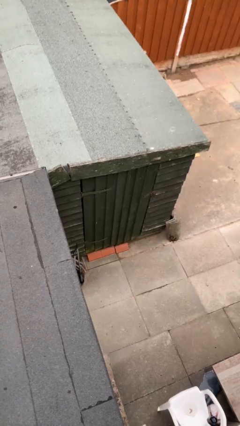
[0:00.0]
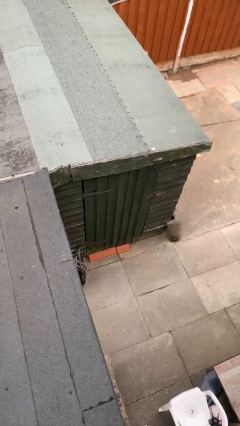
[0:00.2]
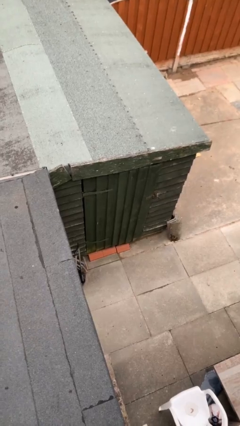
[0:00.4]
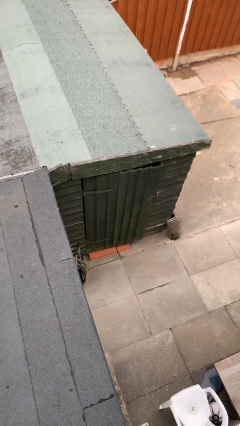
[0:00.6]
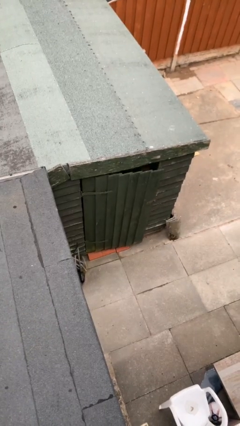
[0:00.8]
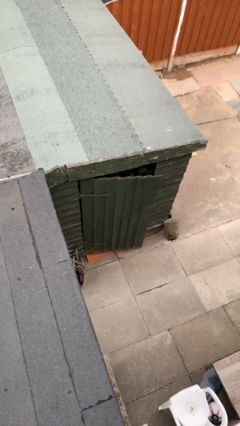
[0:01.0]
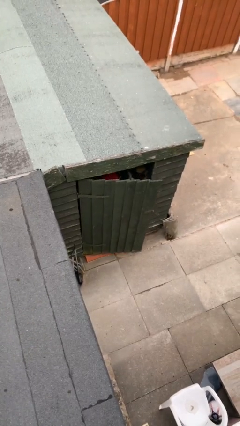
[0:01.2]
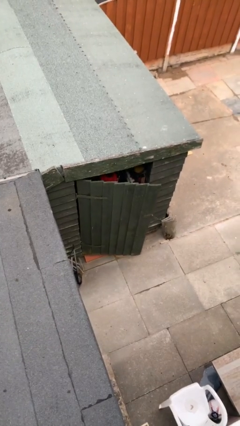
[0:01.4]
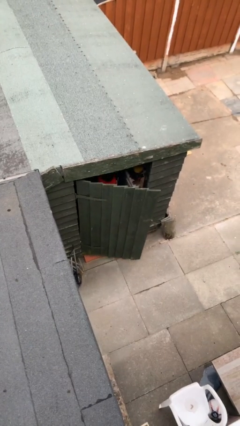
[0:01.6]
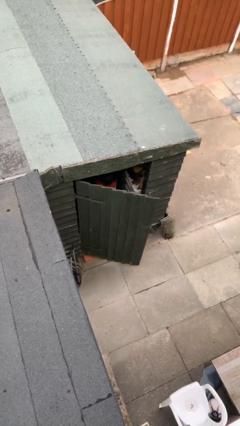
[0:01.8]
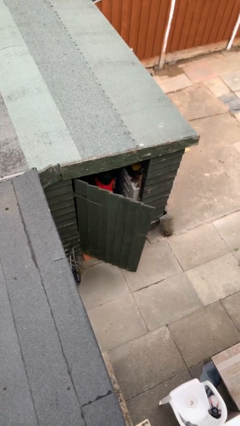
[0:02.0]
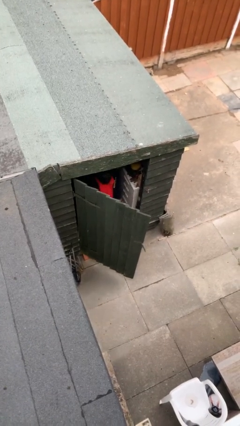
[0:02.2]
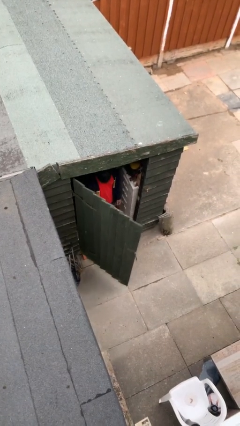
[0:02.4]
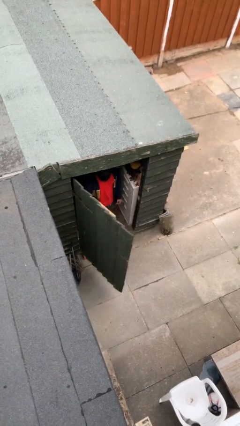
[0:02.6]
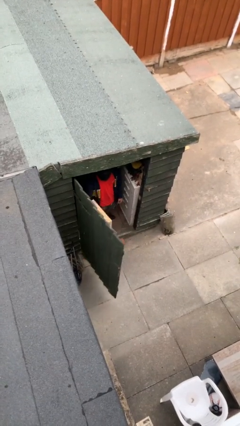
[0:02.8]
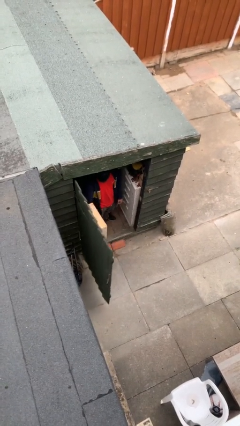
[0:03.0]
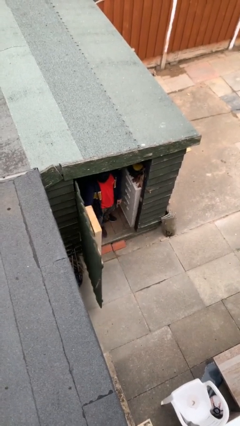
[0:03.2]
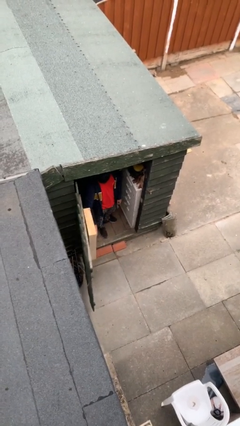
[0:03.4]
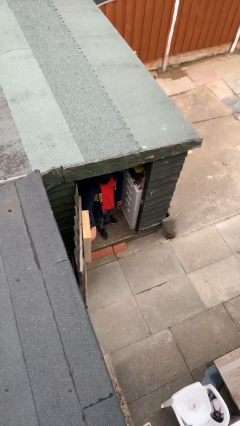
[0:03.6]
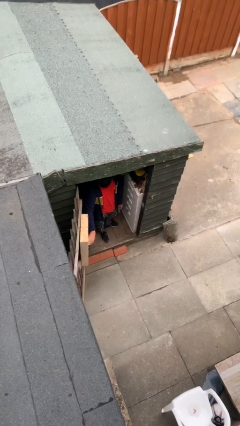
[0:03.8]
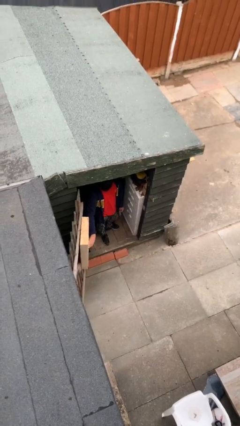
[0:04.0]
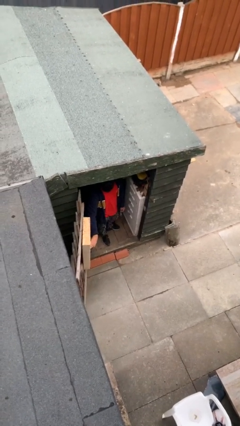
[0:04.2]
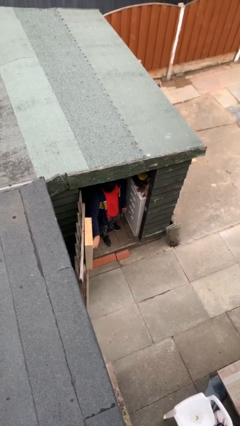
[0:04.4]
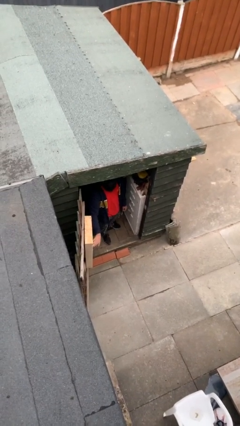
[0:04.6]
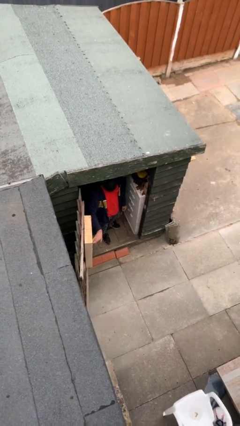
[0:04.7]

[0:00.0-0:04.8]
person opens facility door

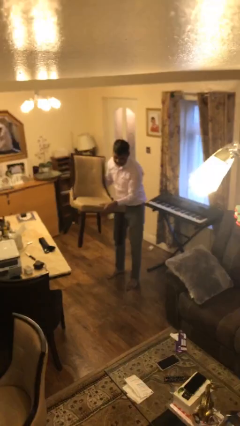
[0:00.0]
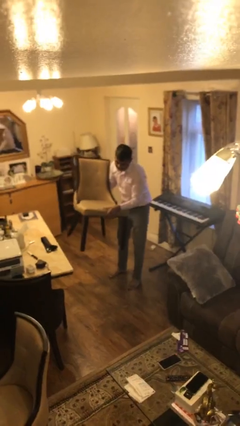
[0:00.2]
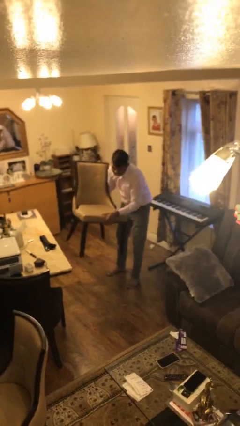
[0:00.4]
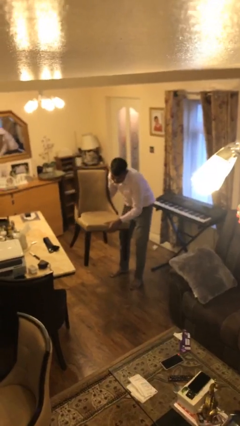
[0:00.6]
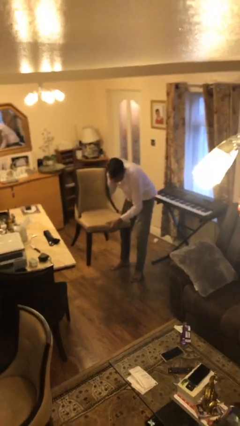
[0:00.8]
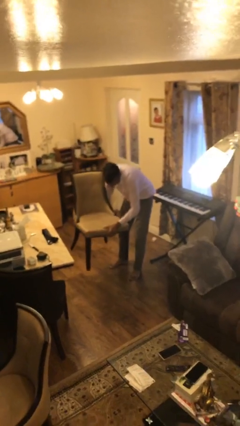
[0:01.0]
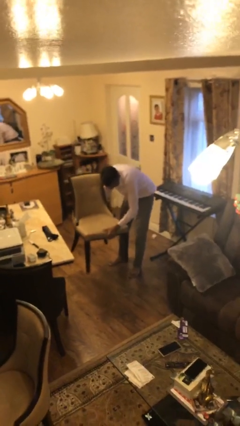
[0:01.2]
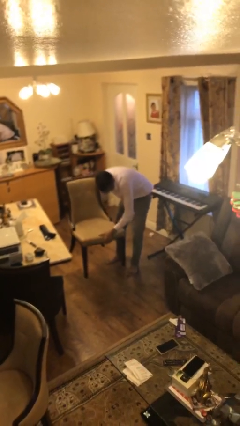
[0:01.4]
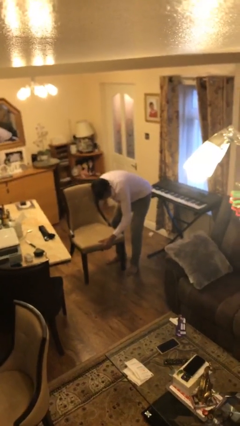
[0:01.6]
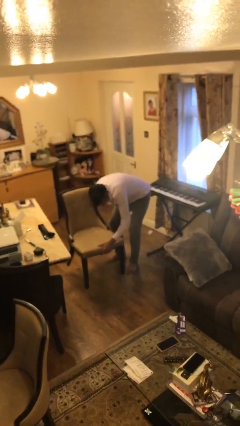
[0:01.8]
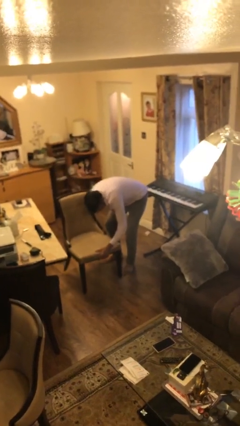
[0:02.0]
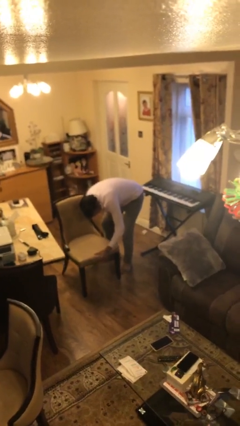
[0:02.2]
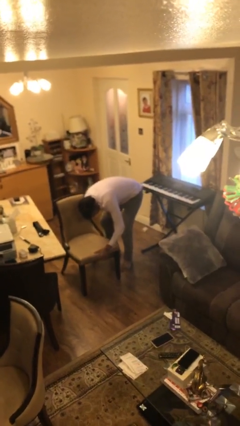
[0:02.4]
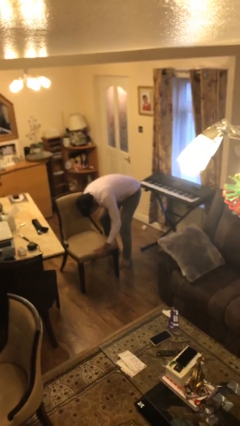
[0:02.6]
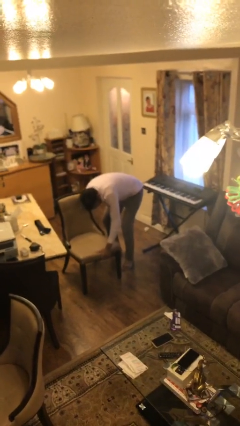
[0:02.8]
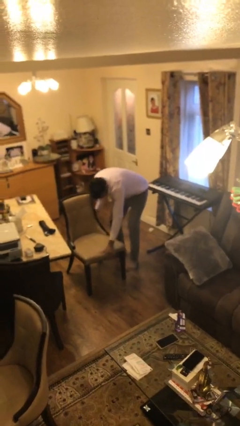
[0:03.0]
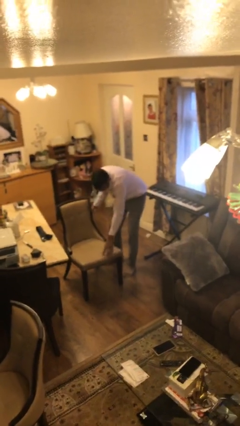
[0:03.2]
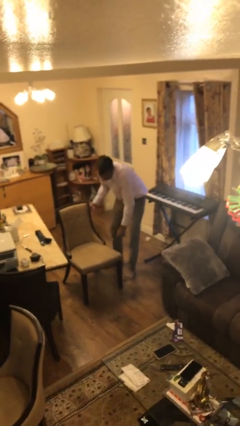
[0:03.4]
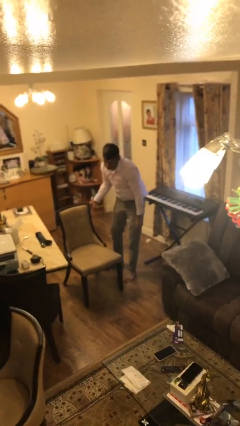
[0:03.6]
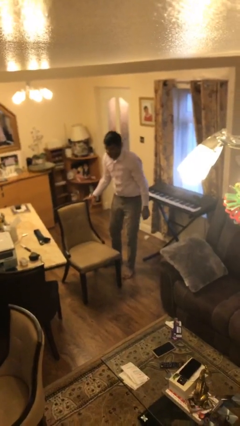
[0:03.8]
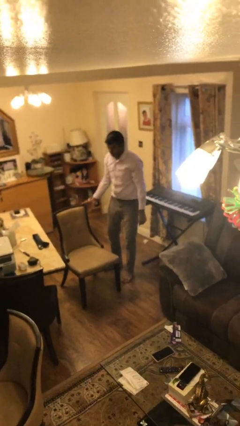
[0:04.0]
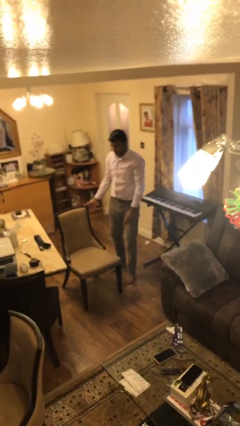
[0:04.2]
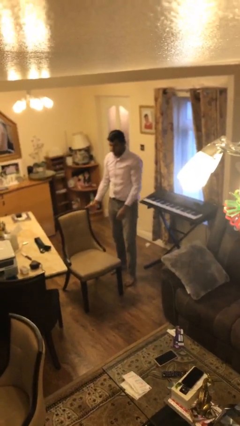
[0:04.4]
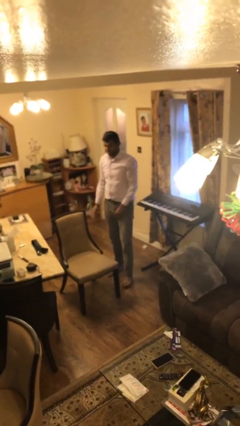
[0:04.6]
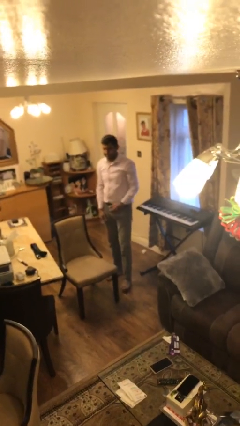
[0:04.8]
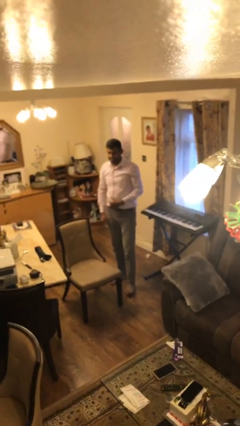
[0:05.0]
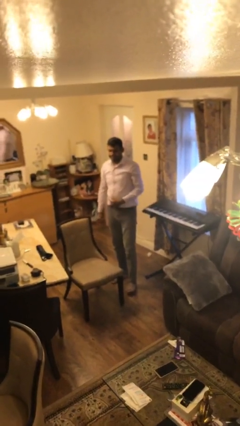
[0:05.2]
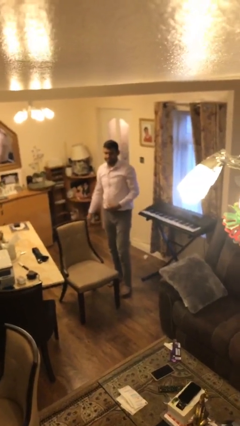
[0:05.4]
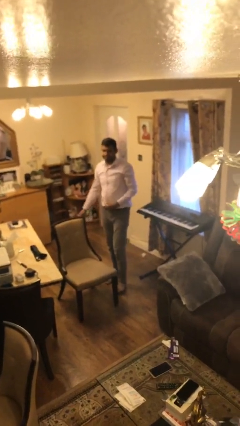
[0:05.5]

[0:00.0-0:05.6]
person puts down object on floor

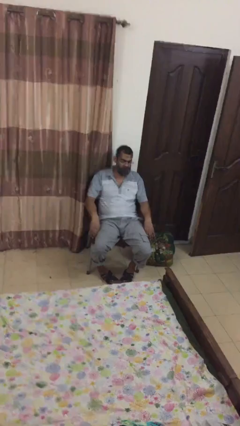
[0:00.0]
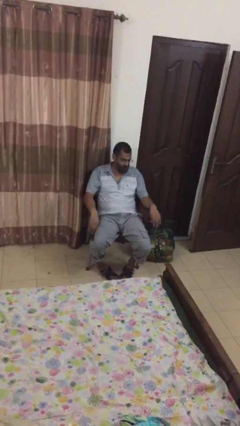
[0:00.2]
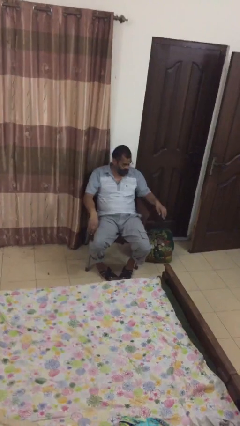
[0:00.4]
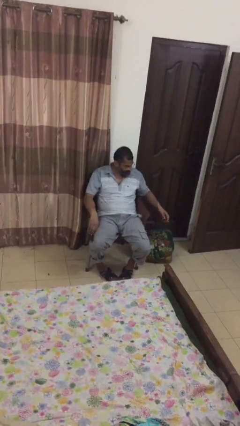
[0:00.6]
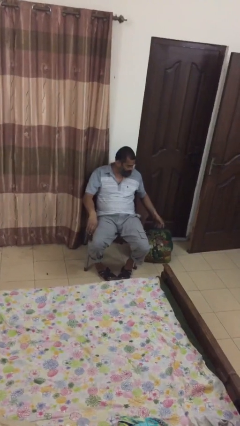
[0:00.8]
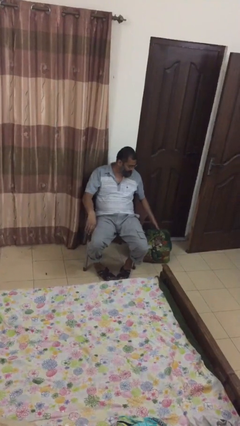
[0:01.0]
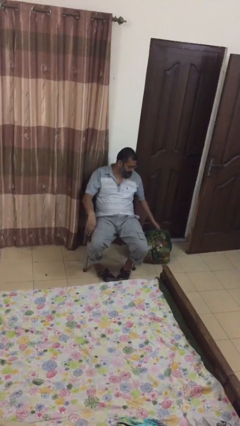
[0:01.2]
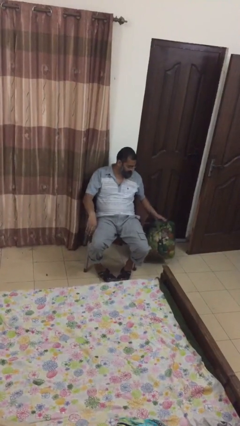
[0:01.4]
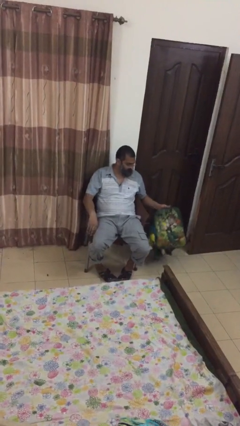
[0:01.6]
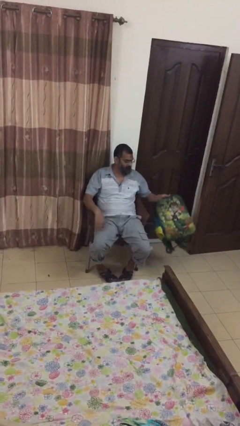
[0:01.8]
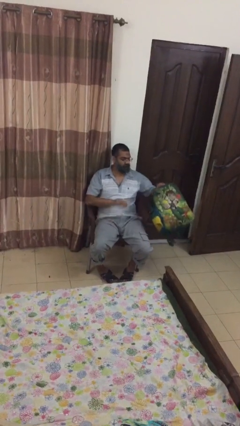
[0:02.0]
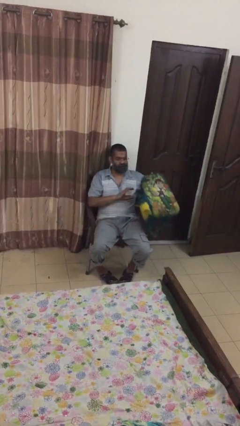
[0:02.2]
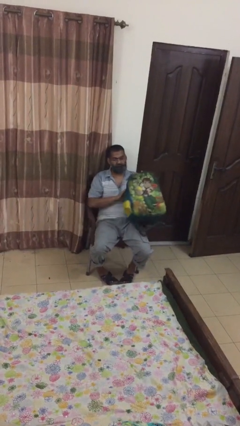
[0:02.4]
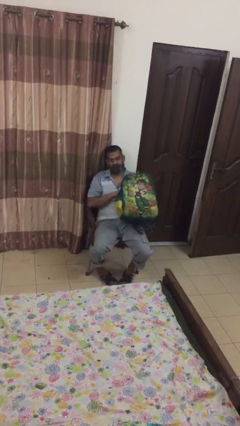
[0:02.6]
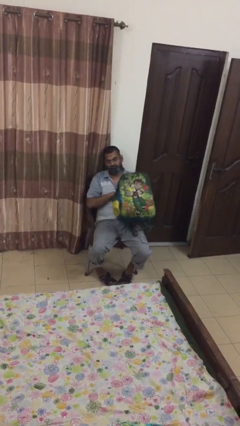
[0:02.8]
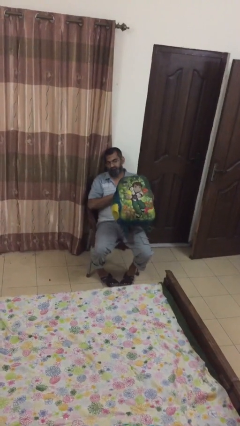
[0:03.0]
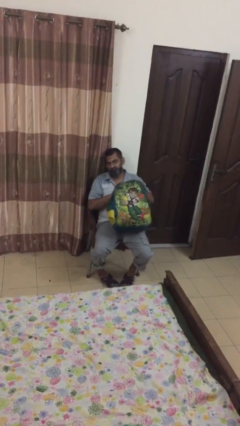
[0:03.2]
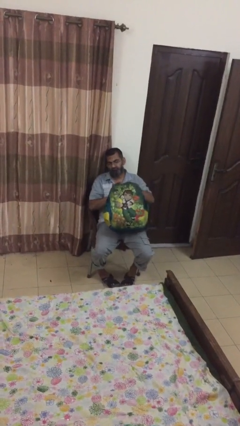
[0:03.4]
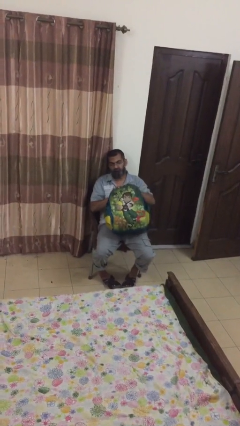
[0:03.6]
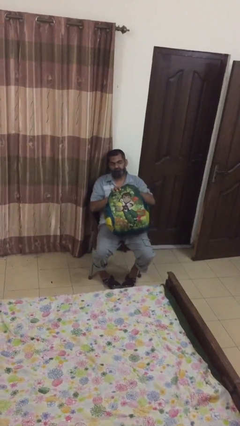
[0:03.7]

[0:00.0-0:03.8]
person picks up object from floor

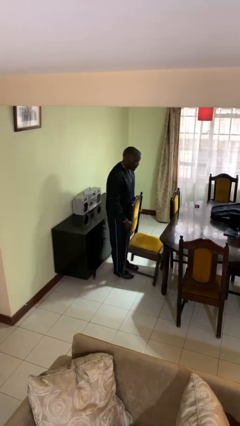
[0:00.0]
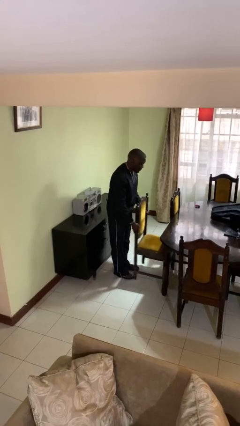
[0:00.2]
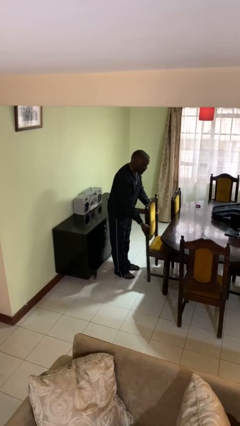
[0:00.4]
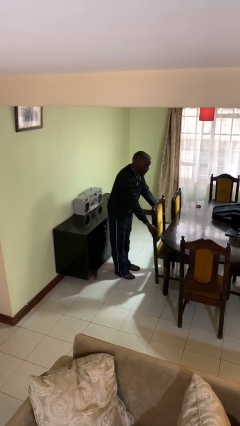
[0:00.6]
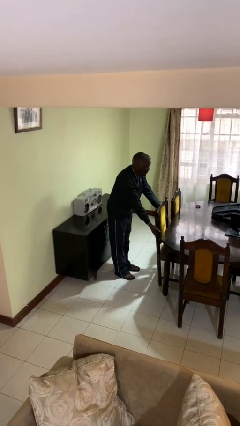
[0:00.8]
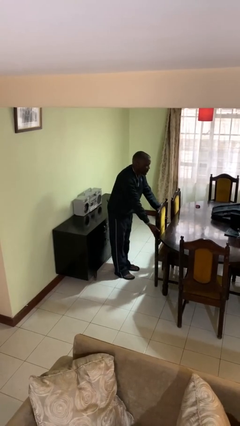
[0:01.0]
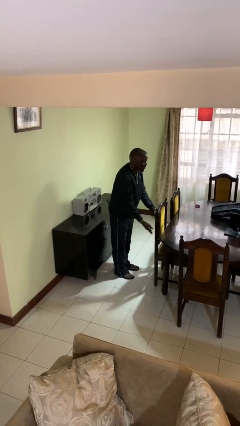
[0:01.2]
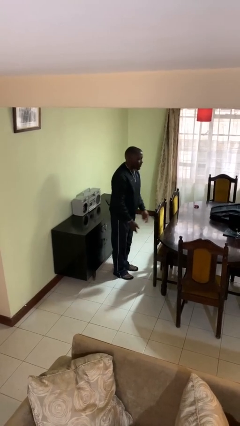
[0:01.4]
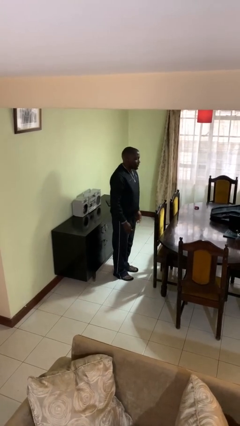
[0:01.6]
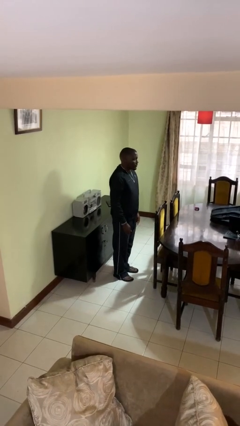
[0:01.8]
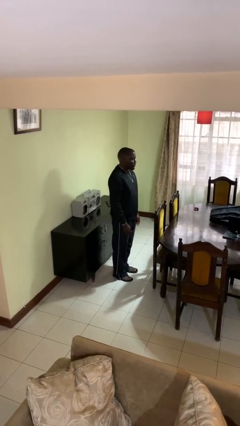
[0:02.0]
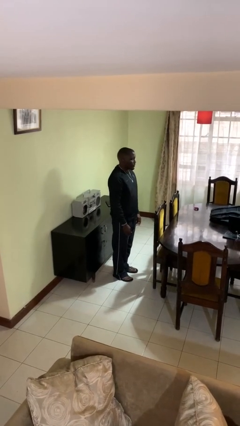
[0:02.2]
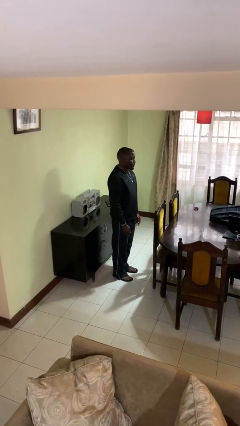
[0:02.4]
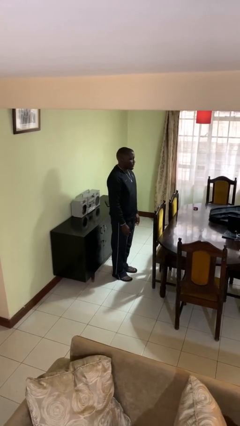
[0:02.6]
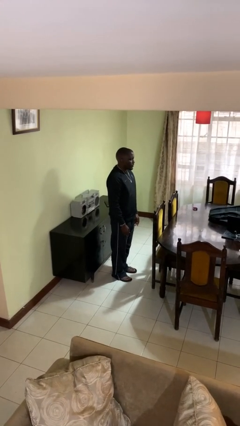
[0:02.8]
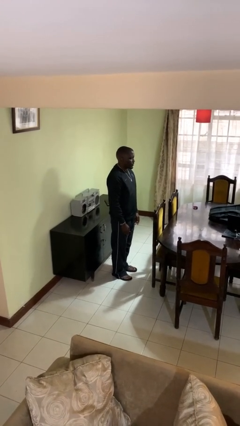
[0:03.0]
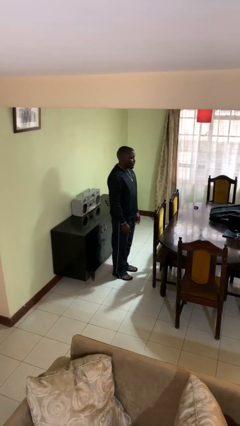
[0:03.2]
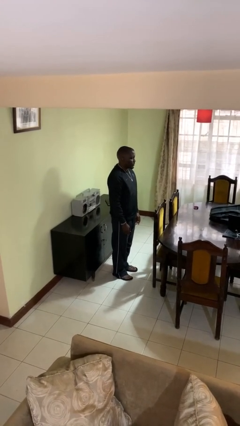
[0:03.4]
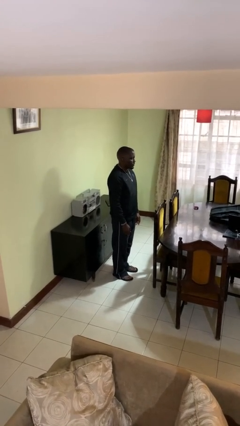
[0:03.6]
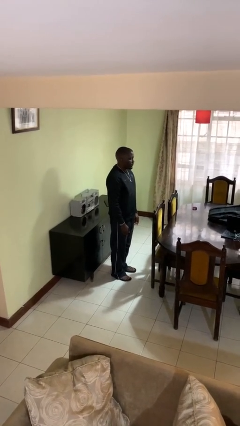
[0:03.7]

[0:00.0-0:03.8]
person pushes in chair
